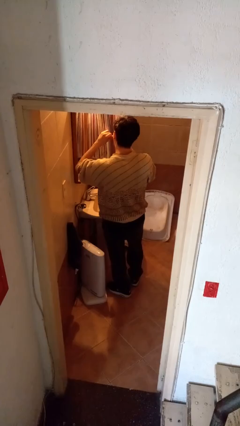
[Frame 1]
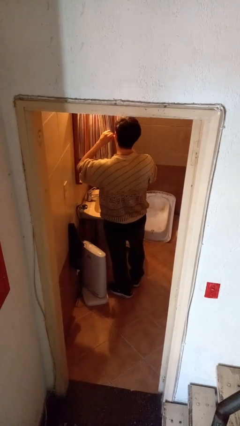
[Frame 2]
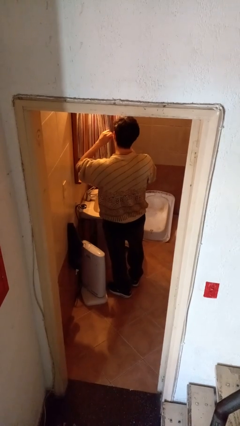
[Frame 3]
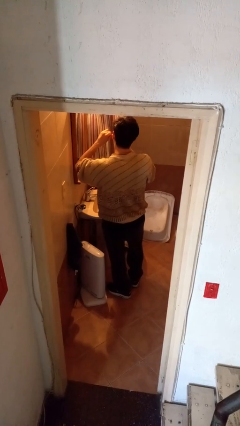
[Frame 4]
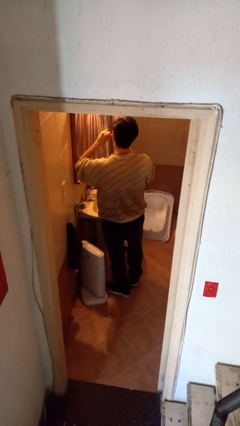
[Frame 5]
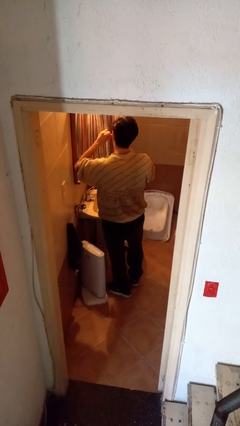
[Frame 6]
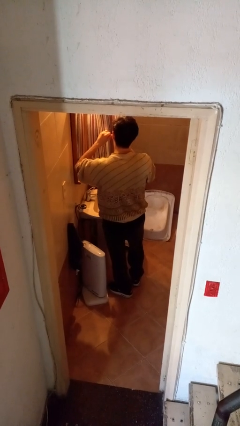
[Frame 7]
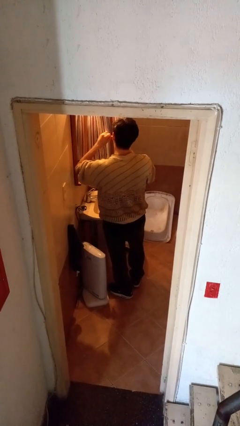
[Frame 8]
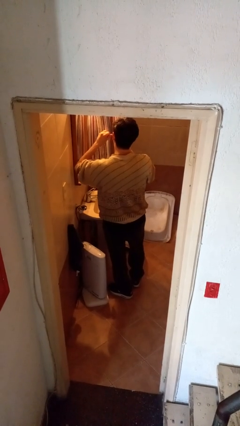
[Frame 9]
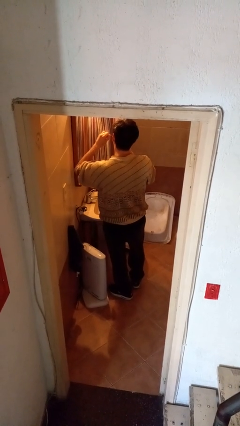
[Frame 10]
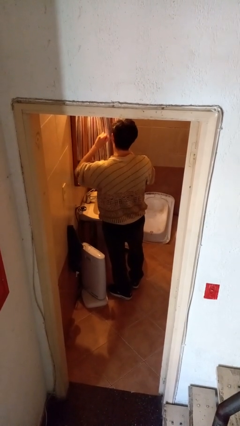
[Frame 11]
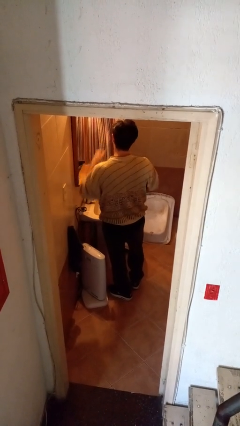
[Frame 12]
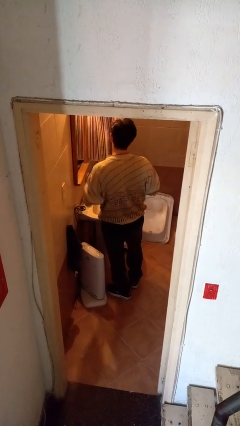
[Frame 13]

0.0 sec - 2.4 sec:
person flosses

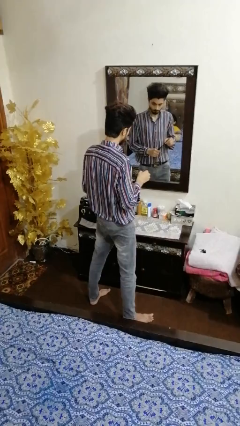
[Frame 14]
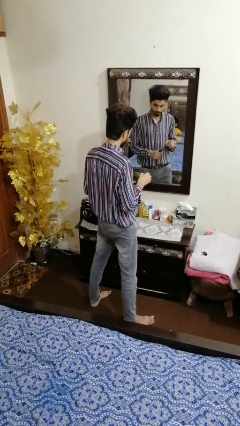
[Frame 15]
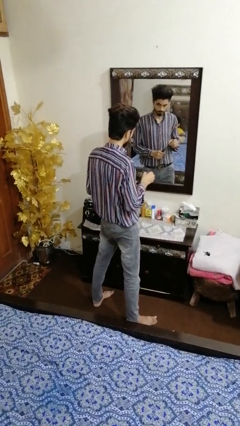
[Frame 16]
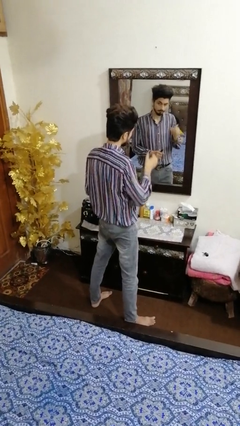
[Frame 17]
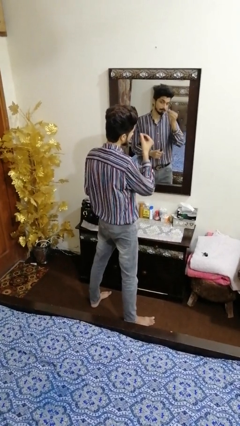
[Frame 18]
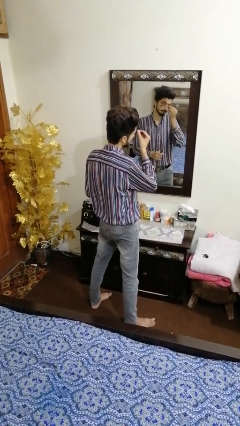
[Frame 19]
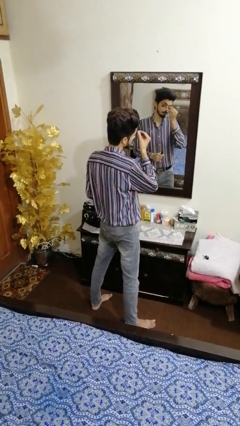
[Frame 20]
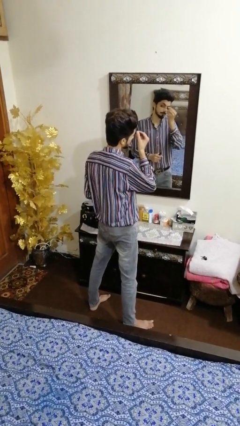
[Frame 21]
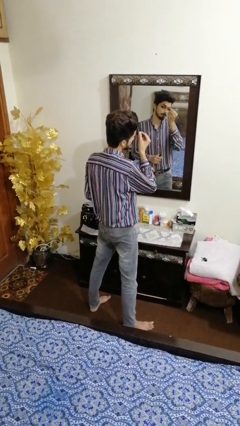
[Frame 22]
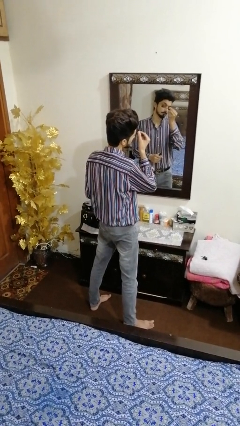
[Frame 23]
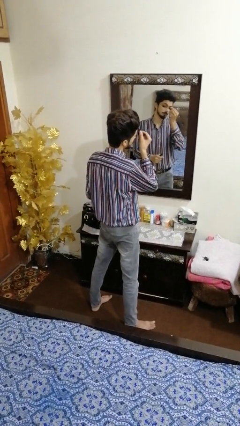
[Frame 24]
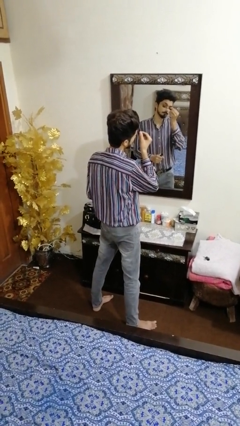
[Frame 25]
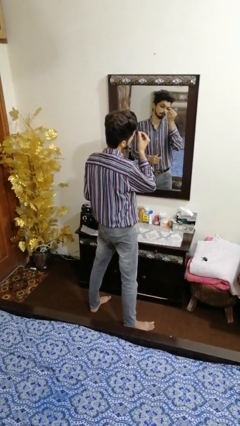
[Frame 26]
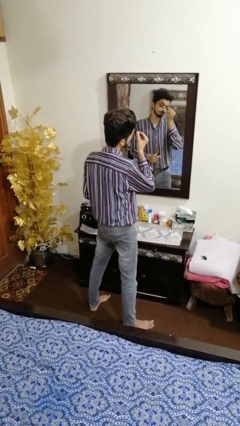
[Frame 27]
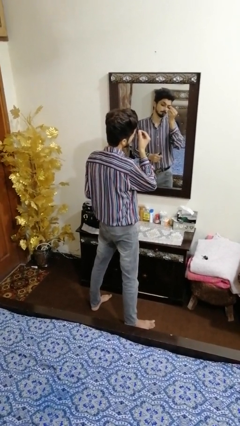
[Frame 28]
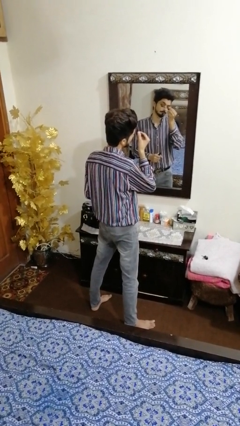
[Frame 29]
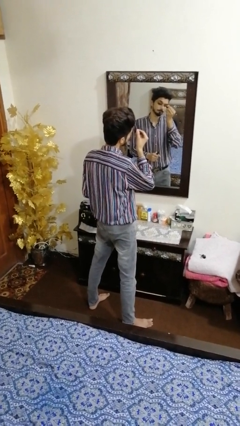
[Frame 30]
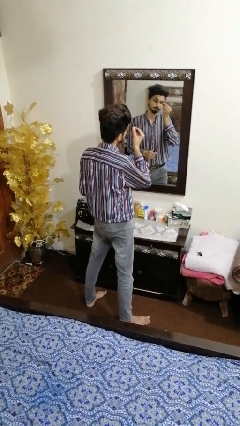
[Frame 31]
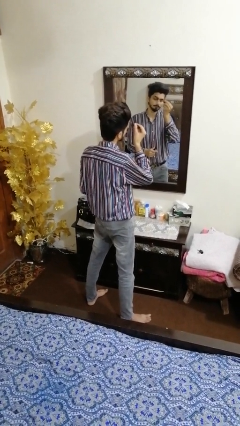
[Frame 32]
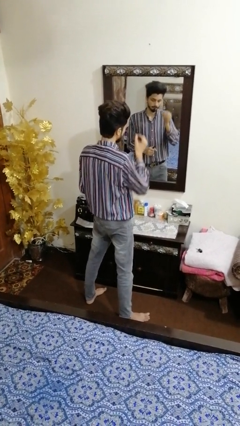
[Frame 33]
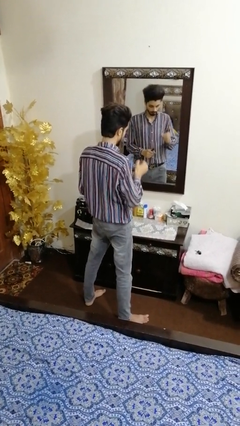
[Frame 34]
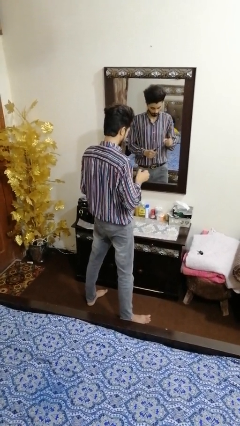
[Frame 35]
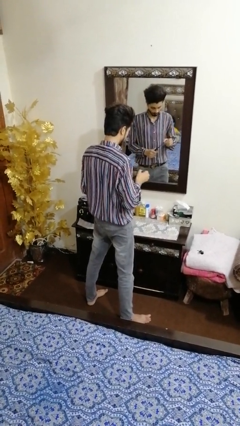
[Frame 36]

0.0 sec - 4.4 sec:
person applies eye makeup

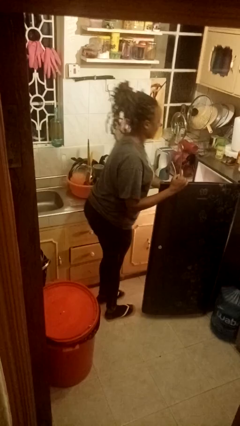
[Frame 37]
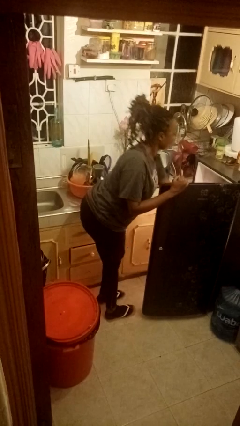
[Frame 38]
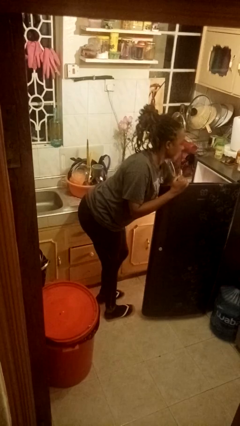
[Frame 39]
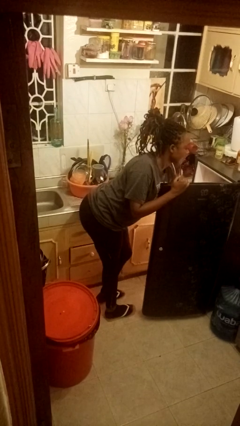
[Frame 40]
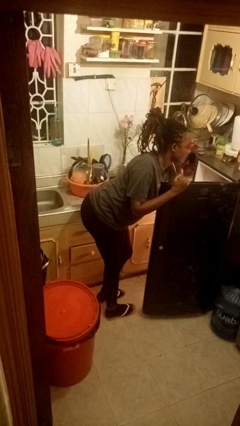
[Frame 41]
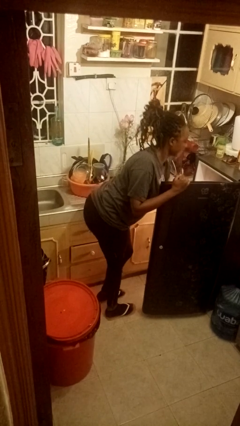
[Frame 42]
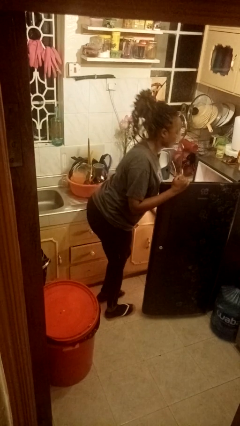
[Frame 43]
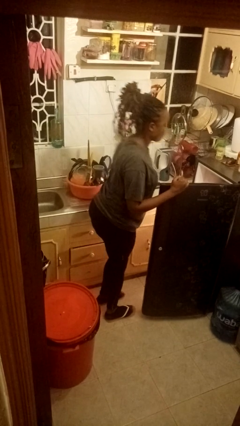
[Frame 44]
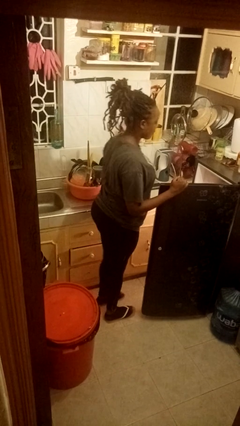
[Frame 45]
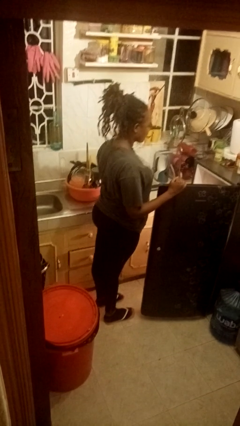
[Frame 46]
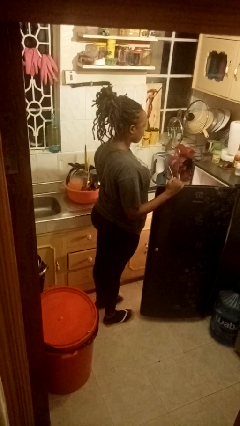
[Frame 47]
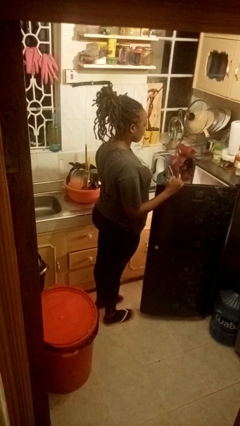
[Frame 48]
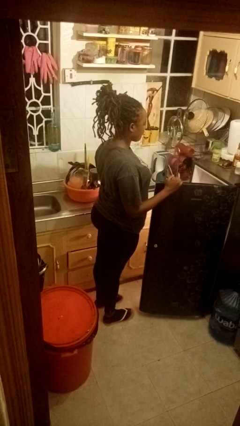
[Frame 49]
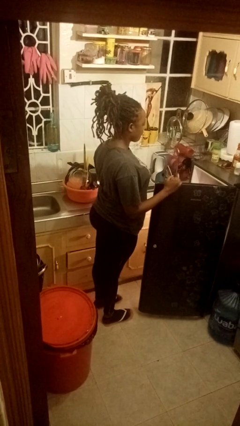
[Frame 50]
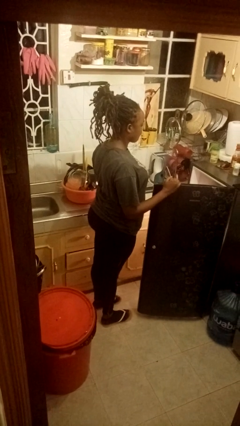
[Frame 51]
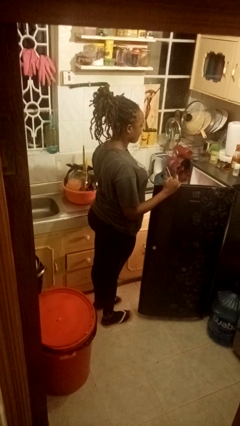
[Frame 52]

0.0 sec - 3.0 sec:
person puts object into refrigerator

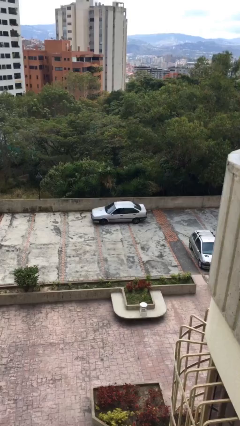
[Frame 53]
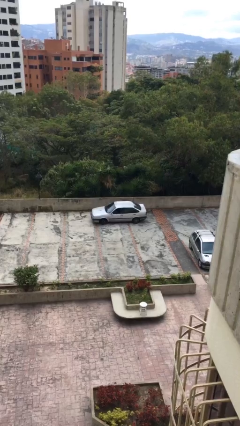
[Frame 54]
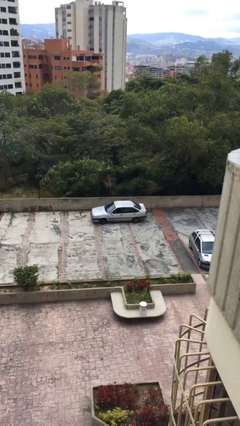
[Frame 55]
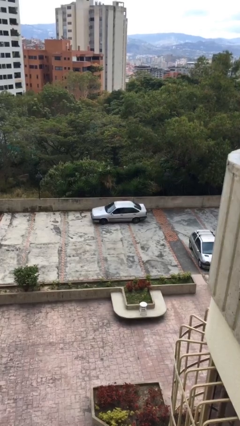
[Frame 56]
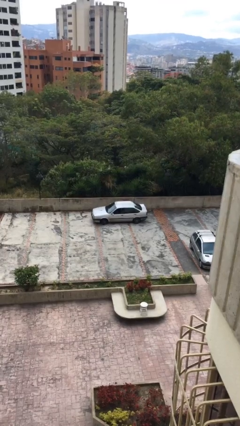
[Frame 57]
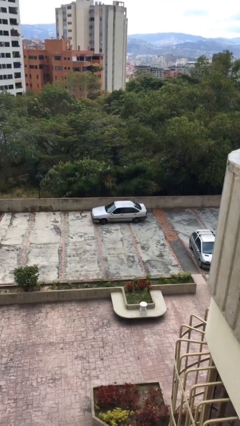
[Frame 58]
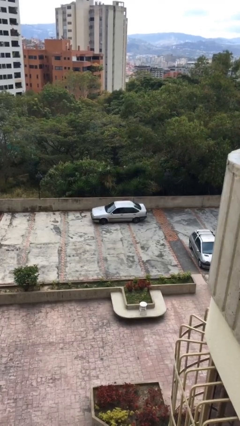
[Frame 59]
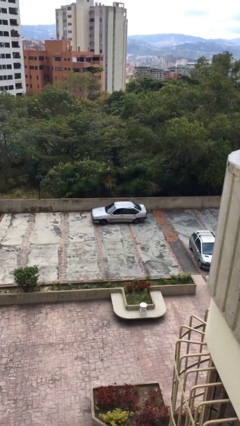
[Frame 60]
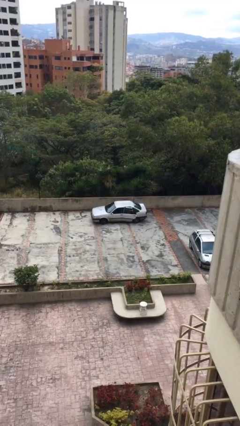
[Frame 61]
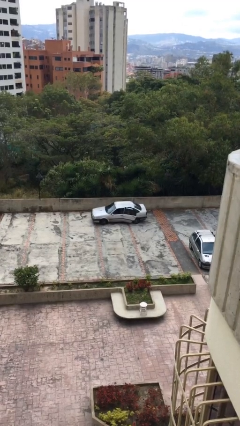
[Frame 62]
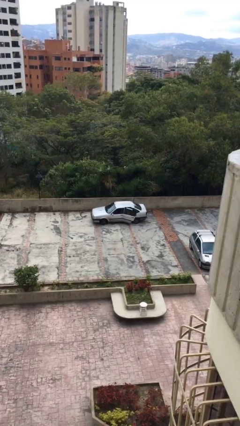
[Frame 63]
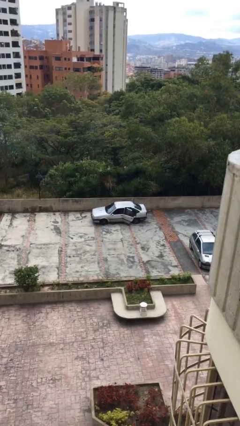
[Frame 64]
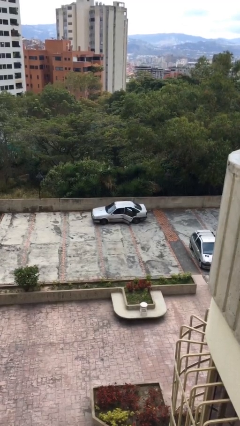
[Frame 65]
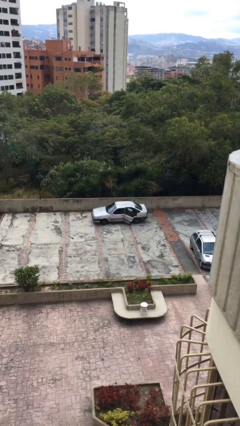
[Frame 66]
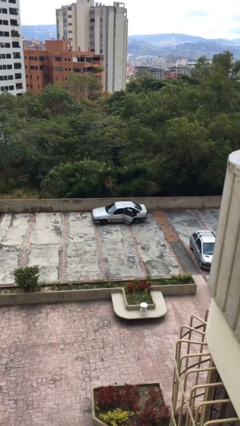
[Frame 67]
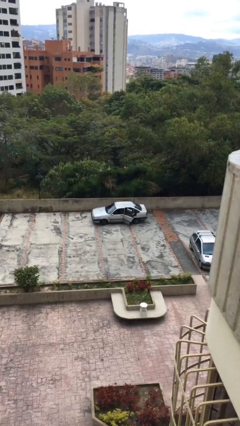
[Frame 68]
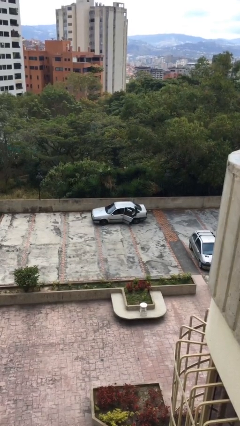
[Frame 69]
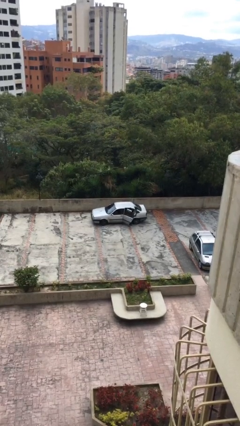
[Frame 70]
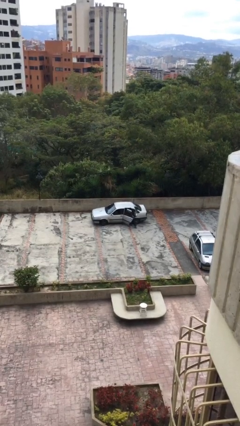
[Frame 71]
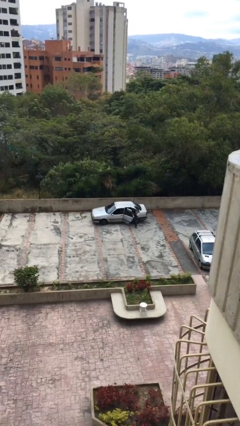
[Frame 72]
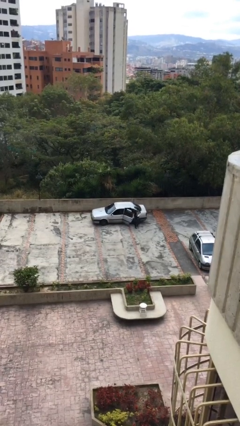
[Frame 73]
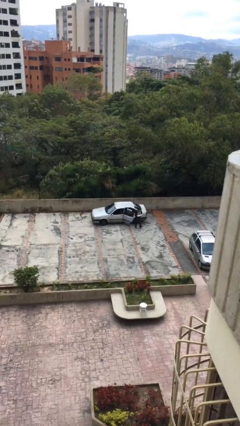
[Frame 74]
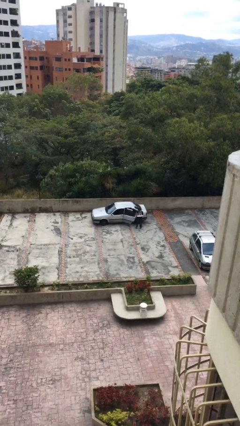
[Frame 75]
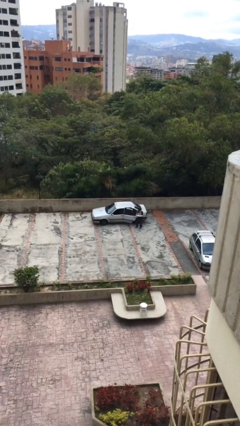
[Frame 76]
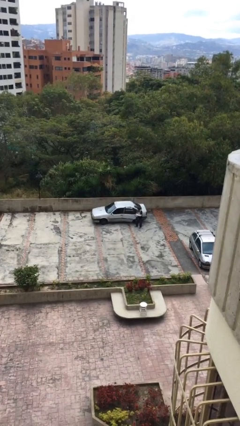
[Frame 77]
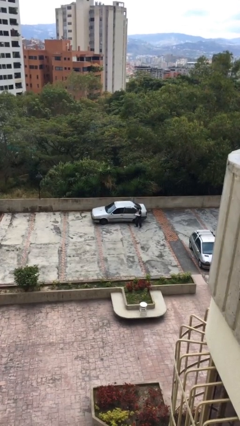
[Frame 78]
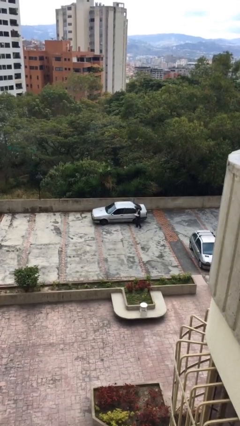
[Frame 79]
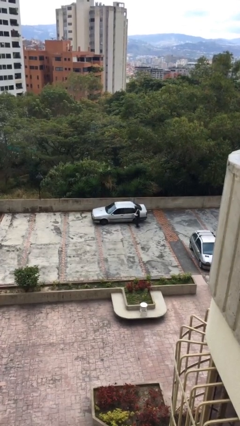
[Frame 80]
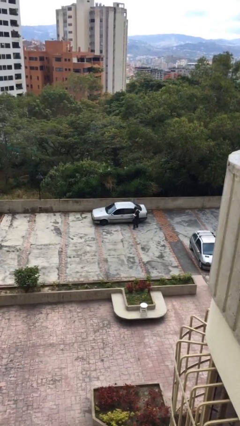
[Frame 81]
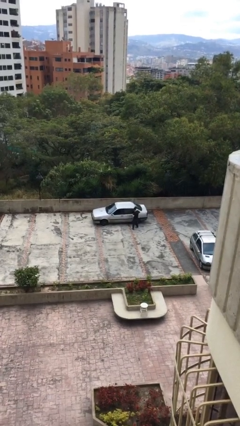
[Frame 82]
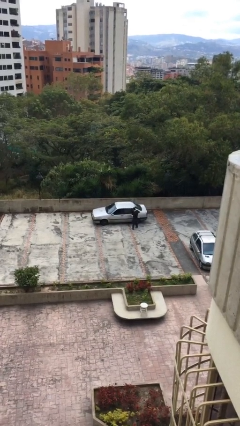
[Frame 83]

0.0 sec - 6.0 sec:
car drops off person

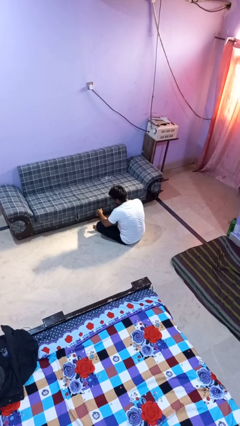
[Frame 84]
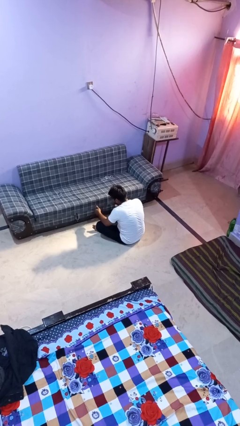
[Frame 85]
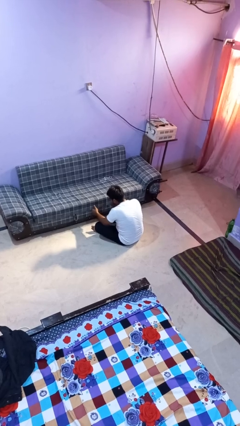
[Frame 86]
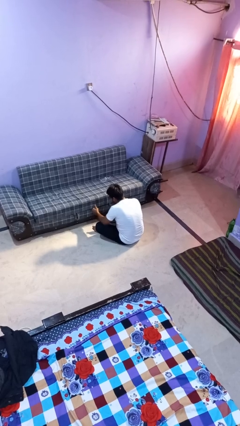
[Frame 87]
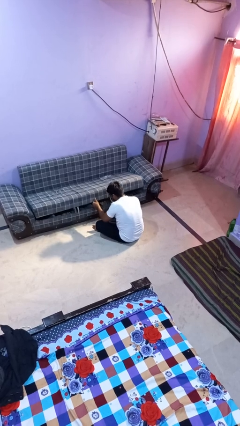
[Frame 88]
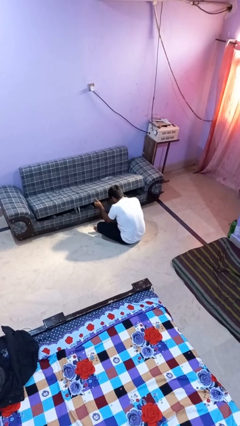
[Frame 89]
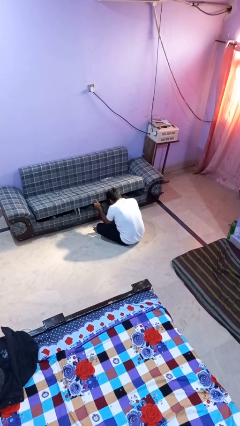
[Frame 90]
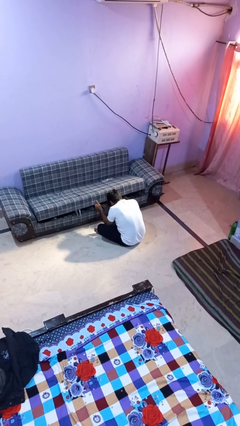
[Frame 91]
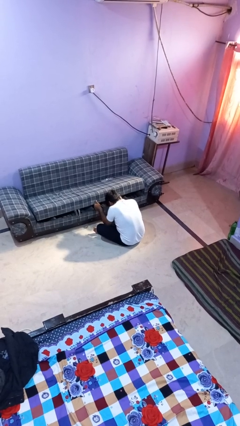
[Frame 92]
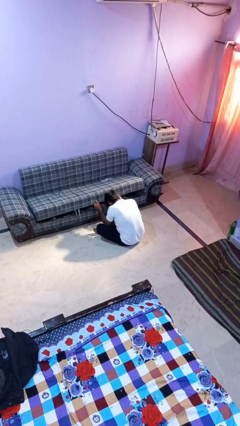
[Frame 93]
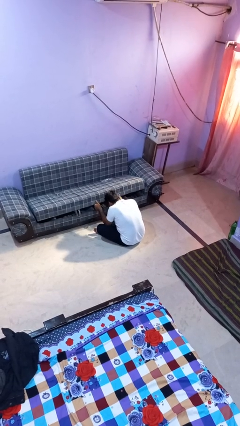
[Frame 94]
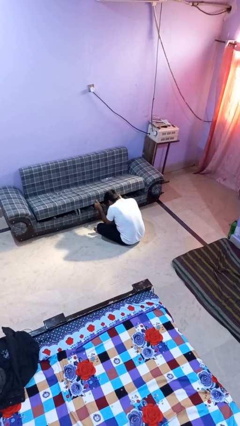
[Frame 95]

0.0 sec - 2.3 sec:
person searches under couch
